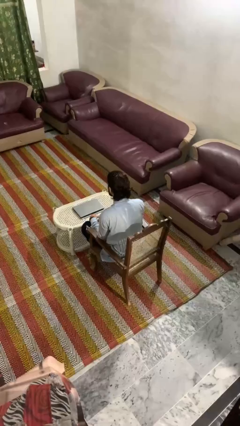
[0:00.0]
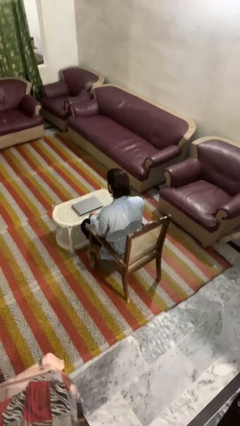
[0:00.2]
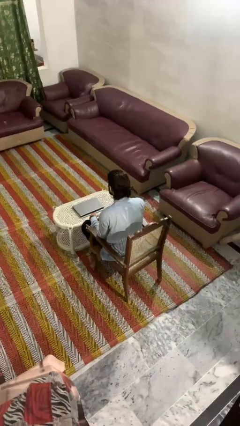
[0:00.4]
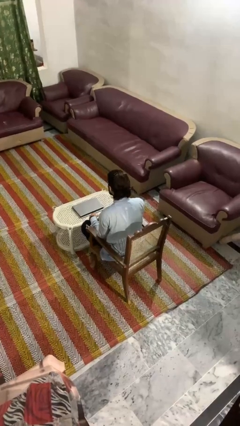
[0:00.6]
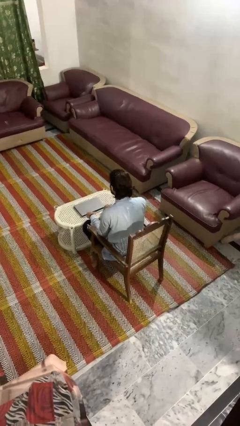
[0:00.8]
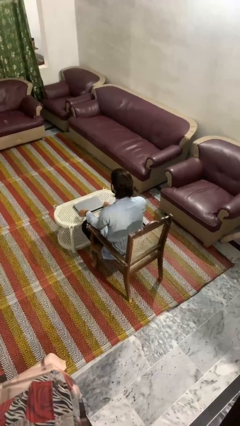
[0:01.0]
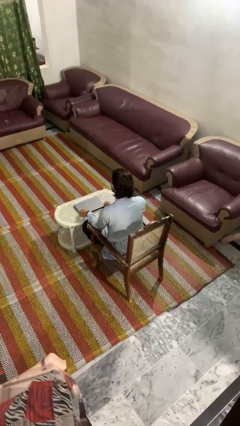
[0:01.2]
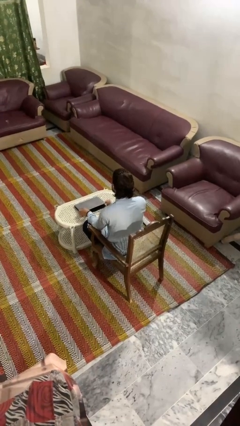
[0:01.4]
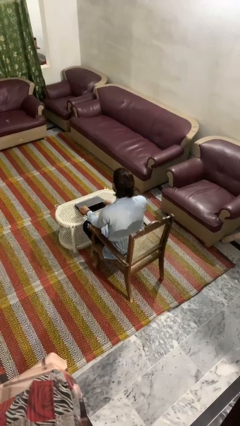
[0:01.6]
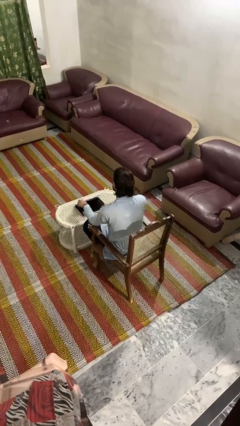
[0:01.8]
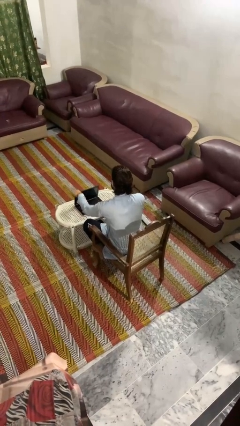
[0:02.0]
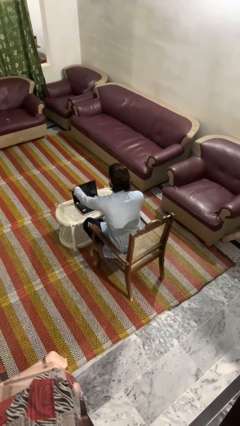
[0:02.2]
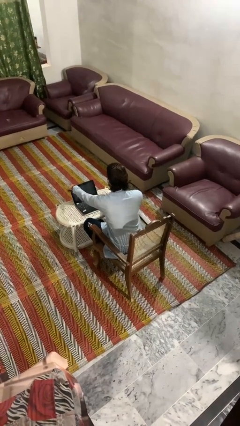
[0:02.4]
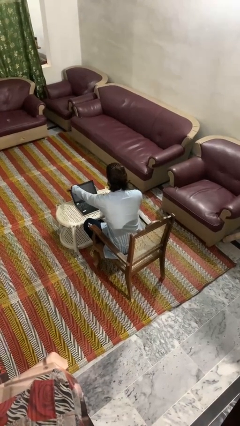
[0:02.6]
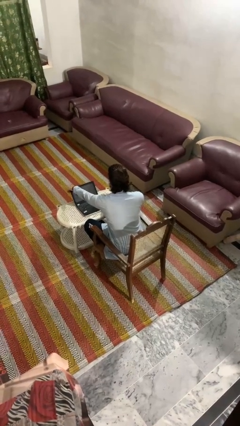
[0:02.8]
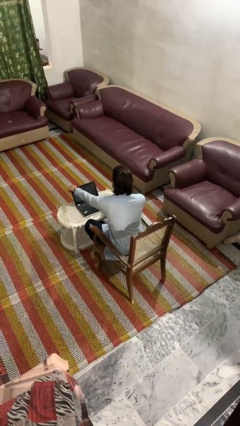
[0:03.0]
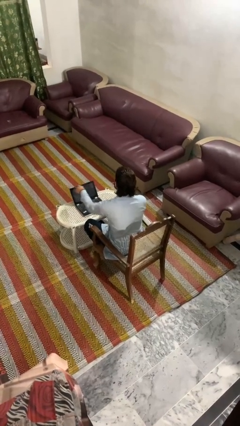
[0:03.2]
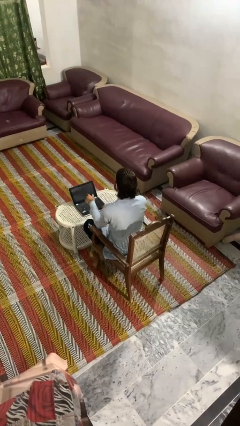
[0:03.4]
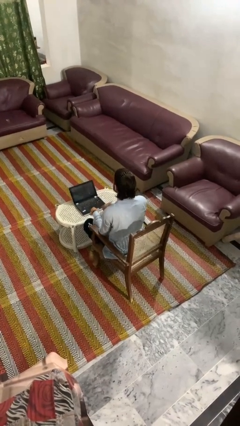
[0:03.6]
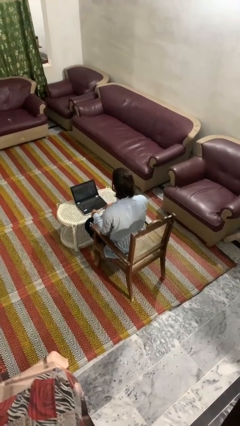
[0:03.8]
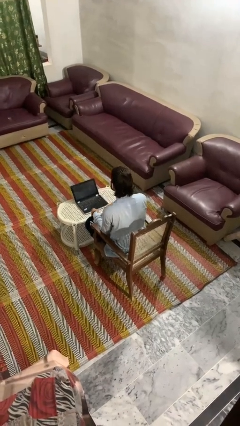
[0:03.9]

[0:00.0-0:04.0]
person opens laptop

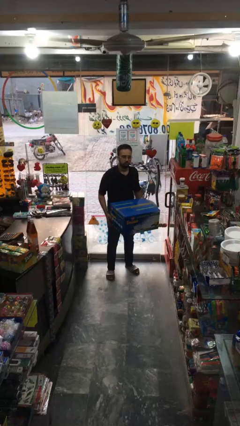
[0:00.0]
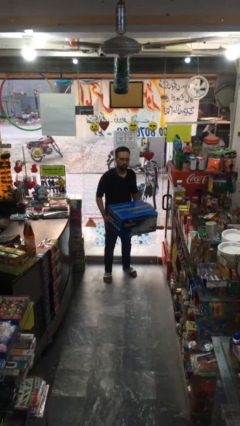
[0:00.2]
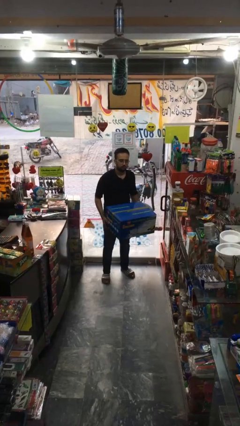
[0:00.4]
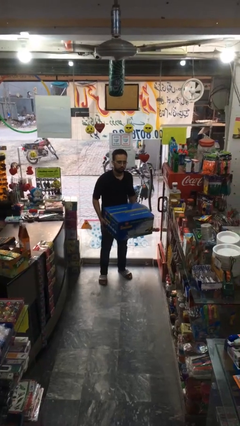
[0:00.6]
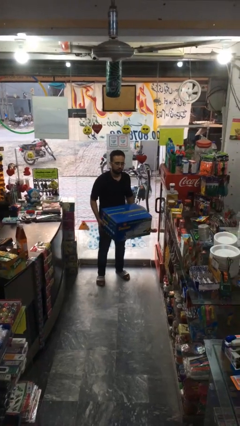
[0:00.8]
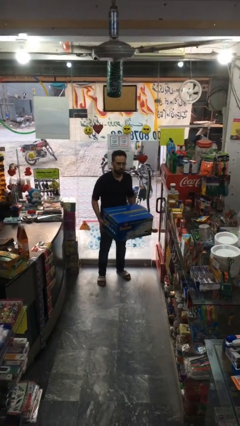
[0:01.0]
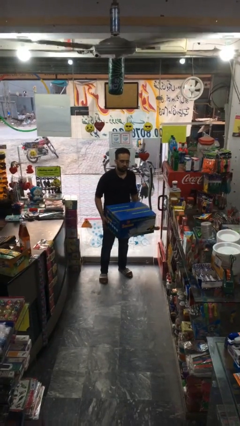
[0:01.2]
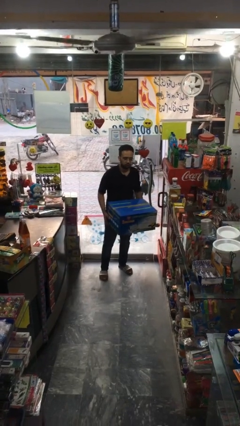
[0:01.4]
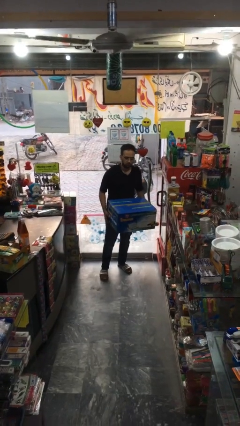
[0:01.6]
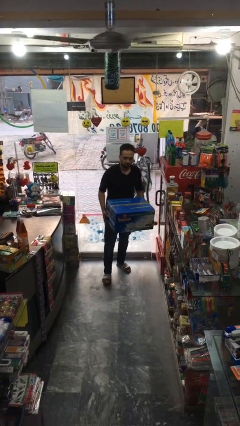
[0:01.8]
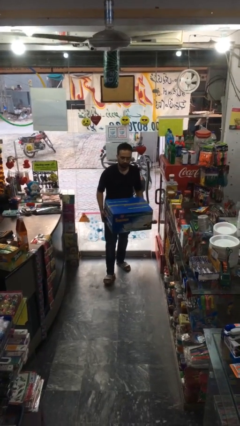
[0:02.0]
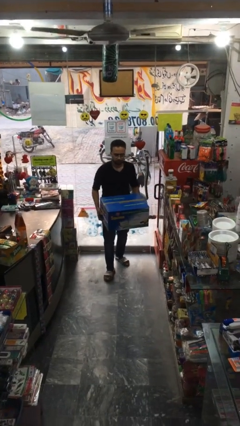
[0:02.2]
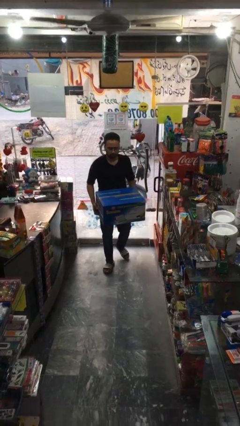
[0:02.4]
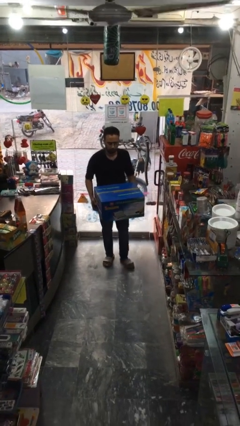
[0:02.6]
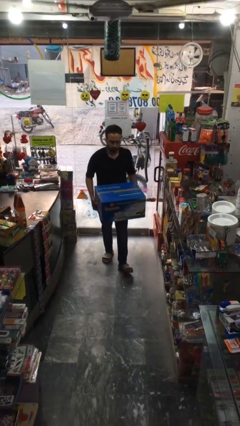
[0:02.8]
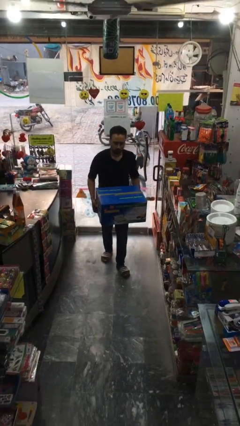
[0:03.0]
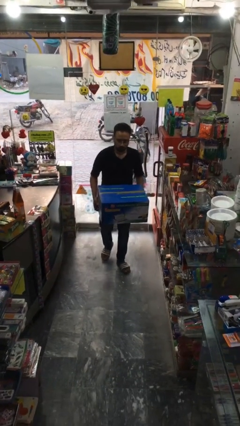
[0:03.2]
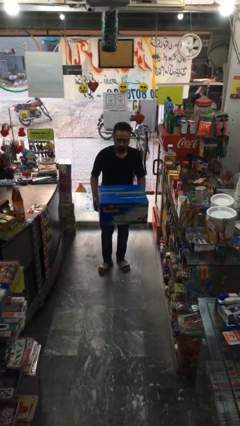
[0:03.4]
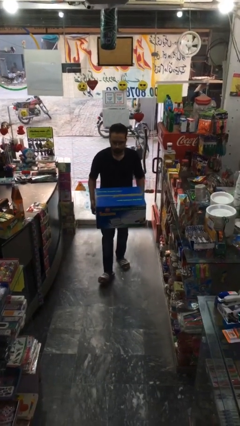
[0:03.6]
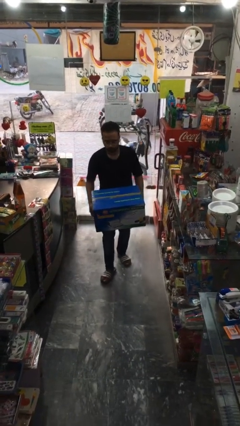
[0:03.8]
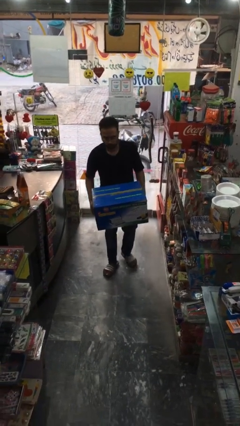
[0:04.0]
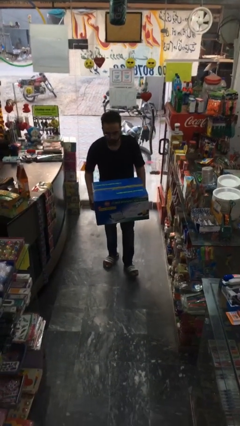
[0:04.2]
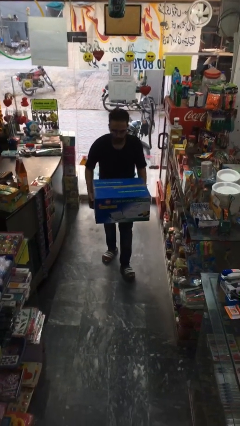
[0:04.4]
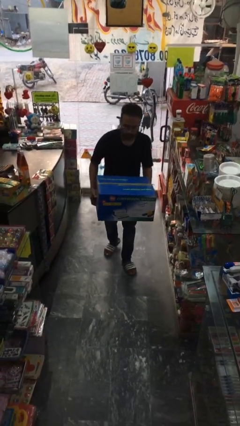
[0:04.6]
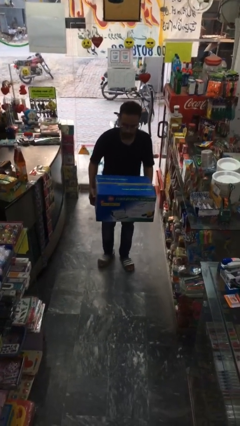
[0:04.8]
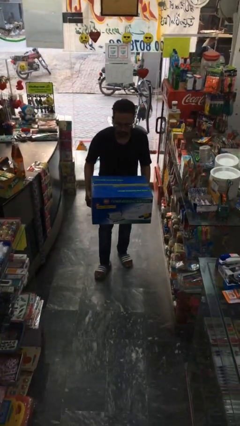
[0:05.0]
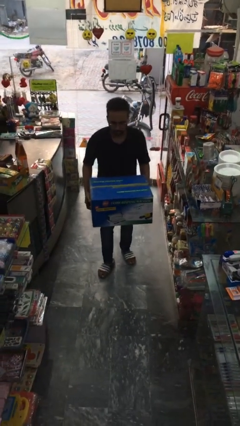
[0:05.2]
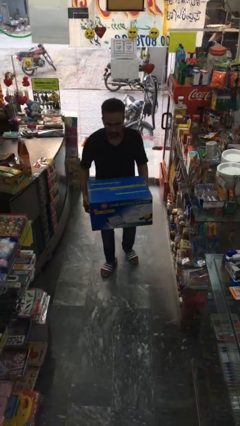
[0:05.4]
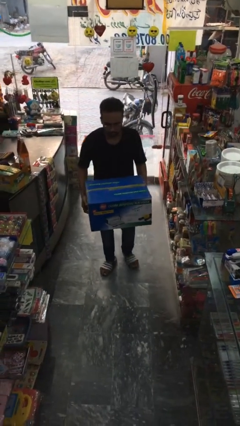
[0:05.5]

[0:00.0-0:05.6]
person carries heavy object

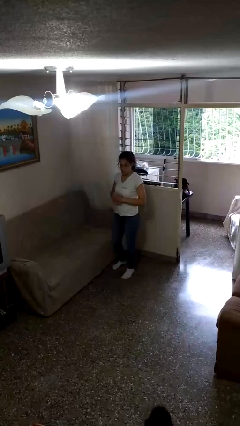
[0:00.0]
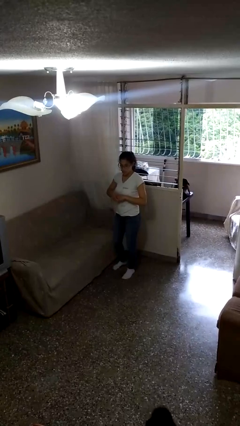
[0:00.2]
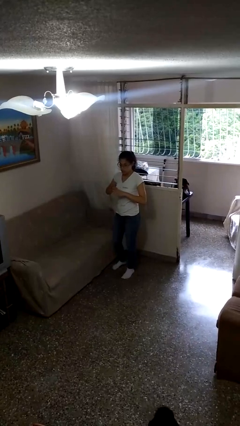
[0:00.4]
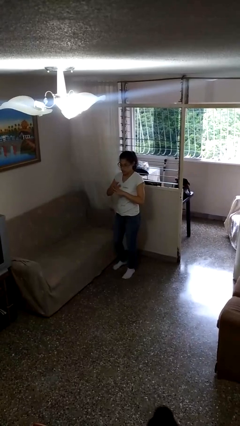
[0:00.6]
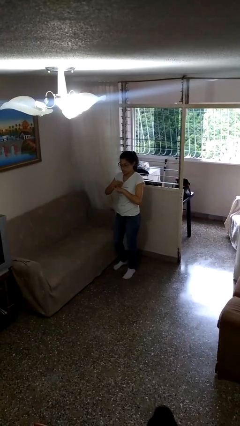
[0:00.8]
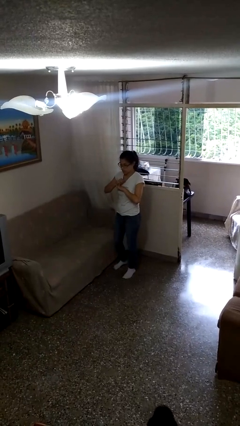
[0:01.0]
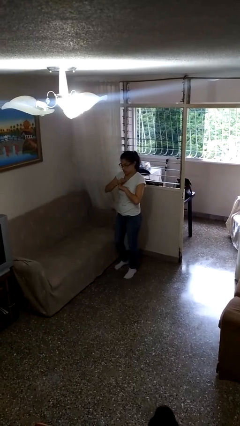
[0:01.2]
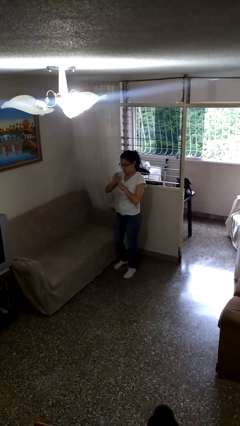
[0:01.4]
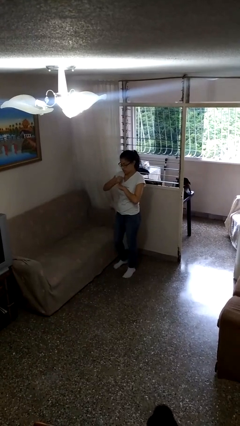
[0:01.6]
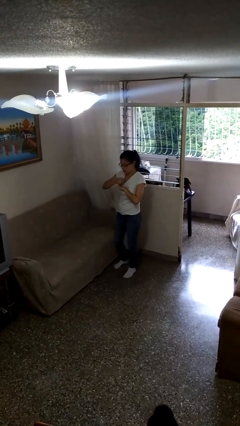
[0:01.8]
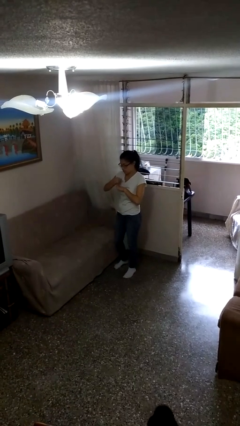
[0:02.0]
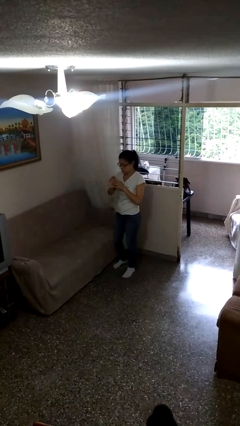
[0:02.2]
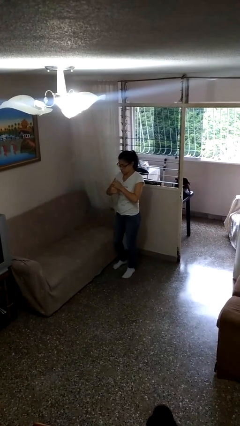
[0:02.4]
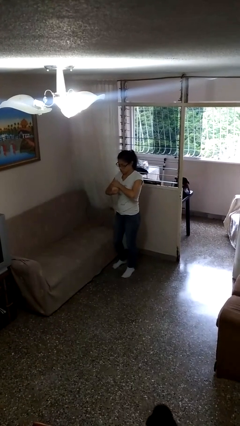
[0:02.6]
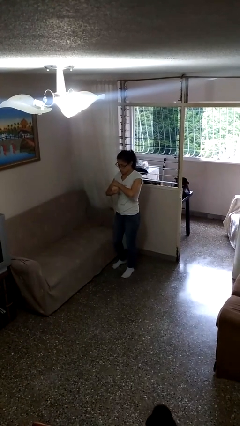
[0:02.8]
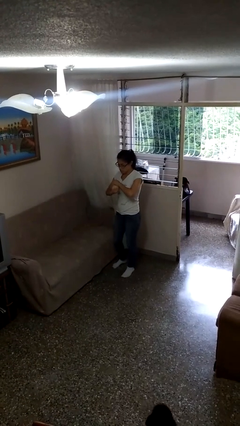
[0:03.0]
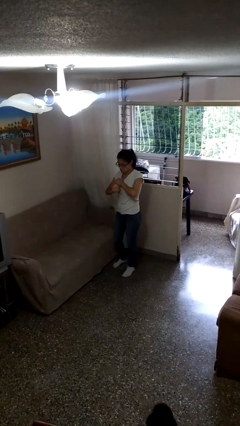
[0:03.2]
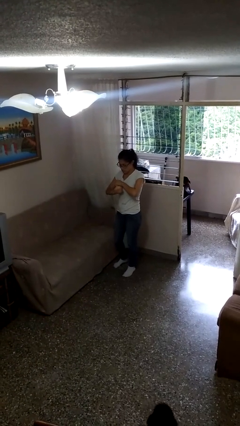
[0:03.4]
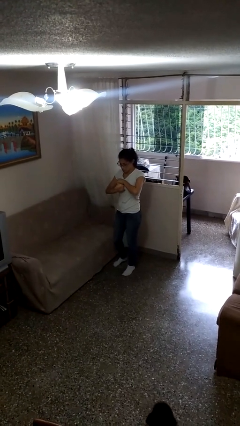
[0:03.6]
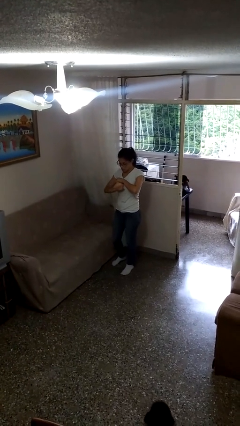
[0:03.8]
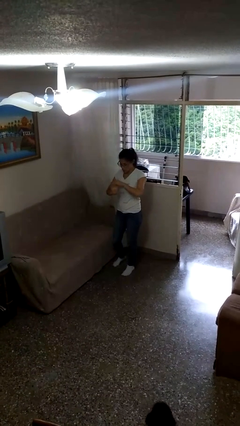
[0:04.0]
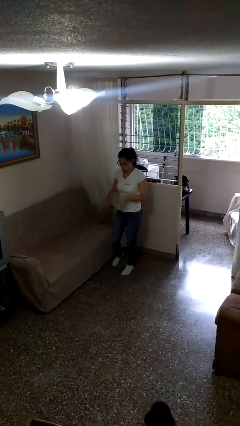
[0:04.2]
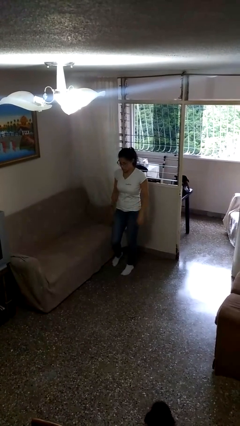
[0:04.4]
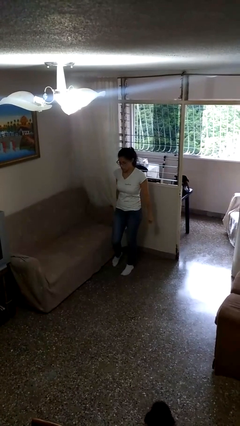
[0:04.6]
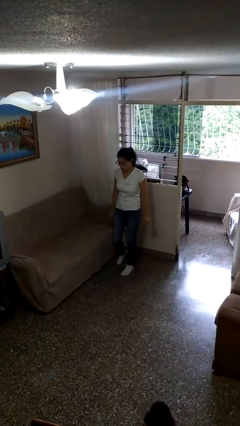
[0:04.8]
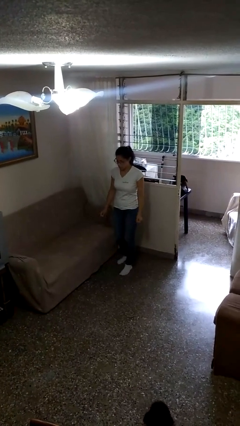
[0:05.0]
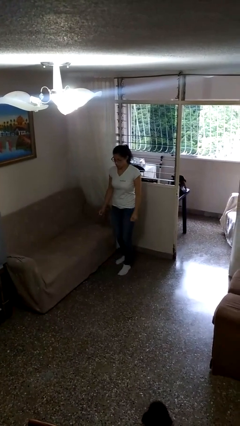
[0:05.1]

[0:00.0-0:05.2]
person cracks knuckles

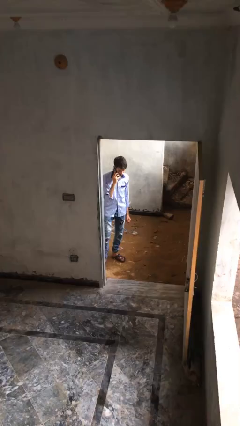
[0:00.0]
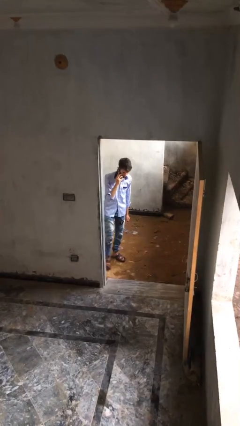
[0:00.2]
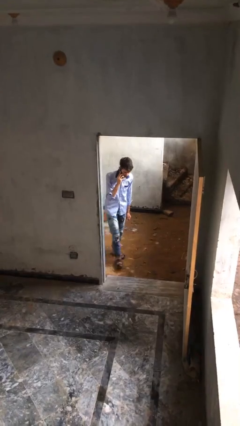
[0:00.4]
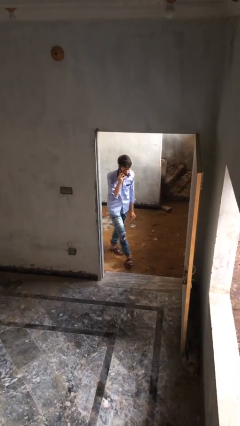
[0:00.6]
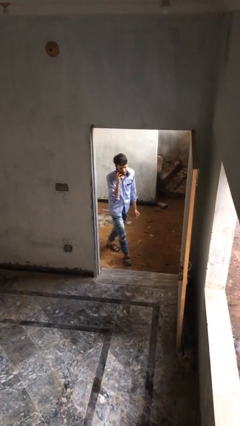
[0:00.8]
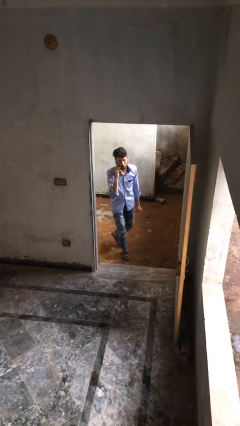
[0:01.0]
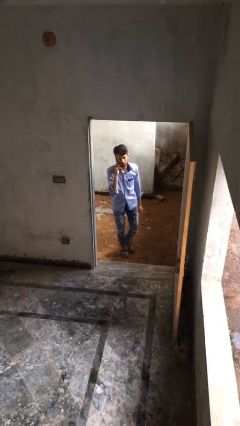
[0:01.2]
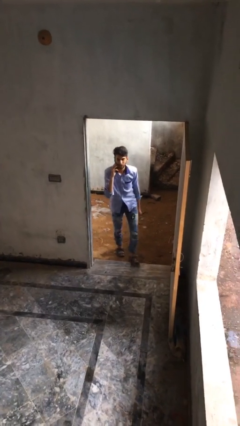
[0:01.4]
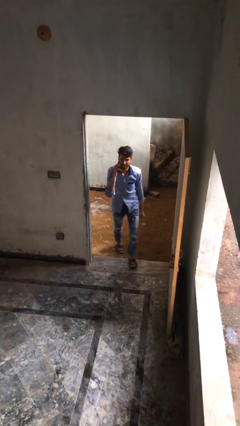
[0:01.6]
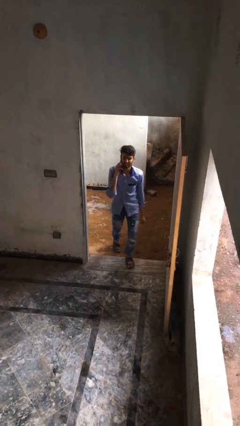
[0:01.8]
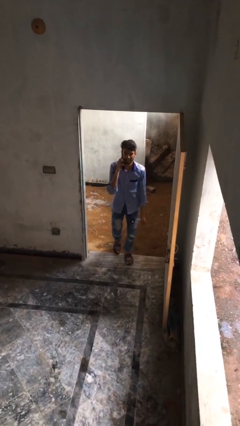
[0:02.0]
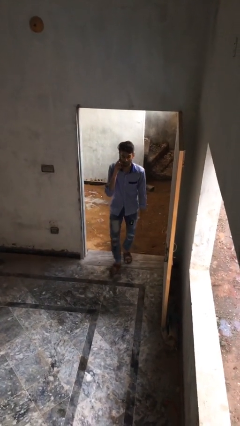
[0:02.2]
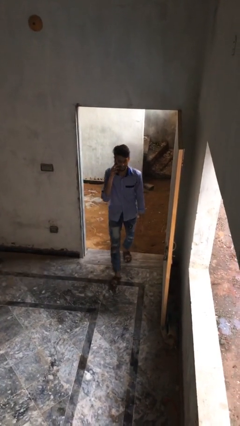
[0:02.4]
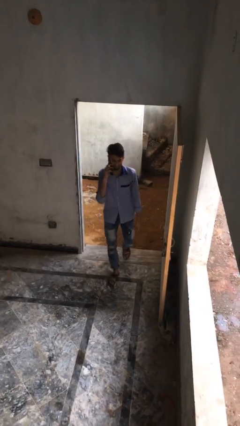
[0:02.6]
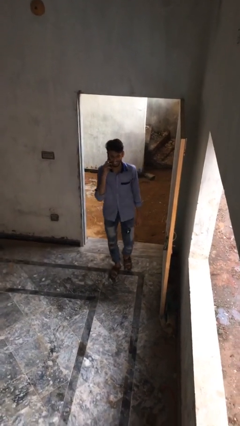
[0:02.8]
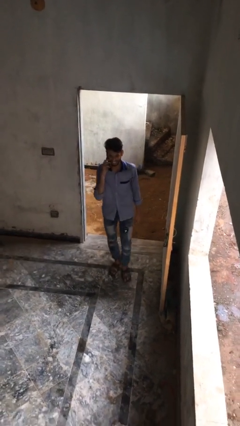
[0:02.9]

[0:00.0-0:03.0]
person enters scene through structure
